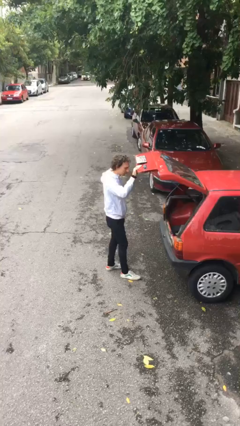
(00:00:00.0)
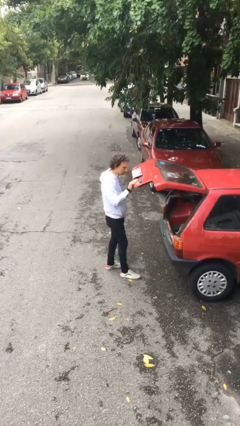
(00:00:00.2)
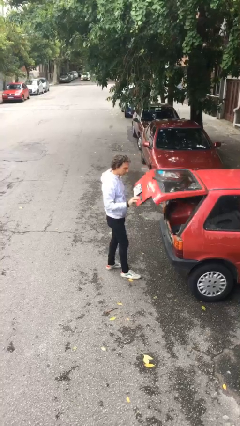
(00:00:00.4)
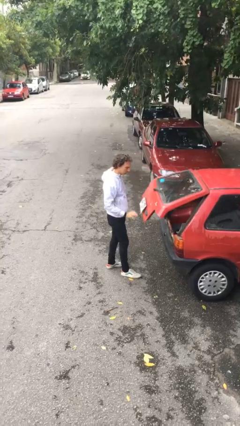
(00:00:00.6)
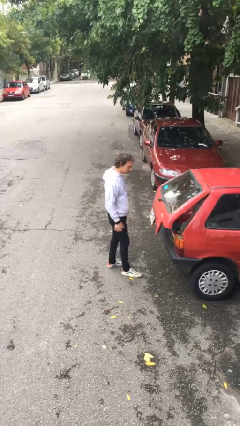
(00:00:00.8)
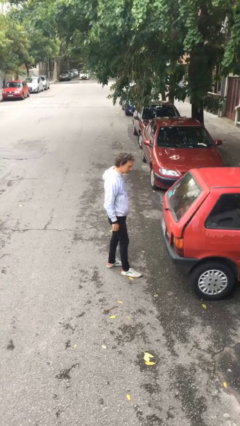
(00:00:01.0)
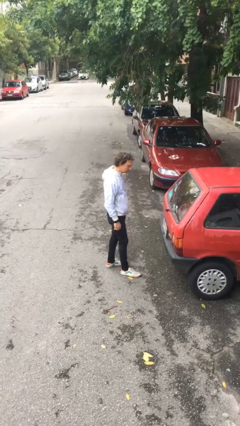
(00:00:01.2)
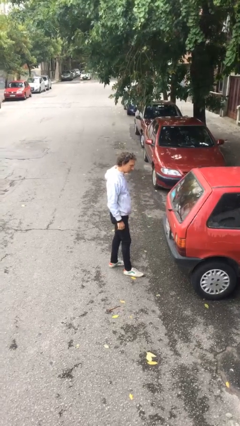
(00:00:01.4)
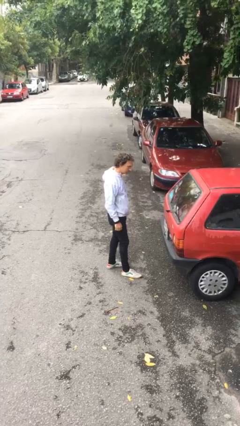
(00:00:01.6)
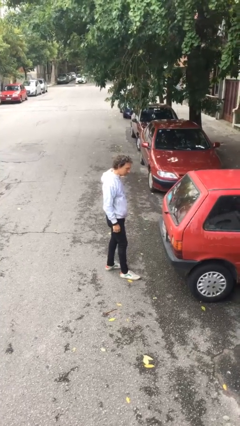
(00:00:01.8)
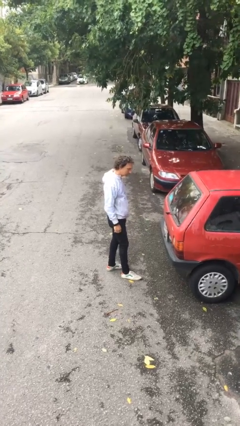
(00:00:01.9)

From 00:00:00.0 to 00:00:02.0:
person closes car trunk

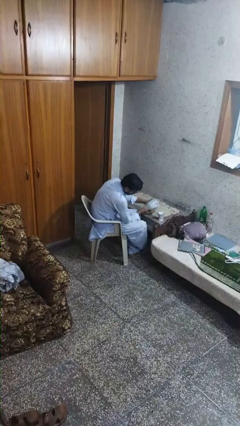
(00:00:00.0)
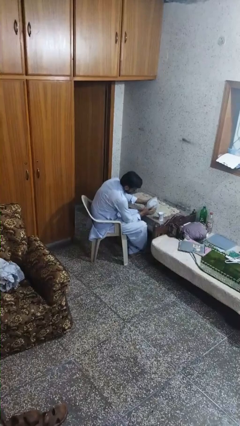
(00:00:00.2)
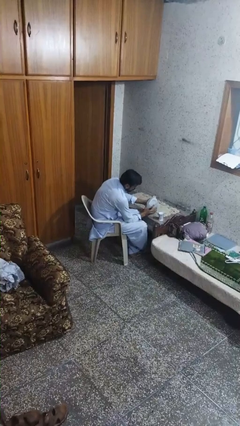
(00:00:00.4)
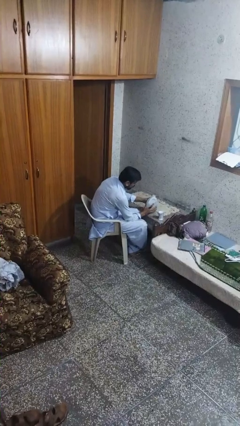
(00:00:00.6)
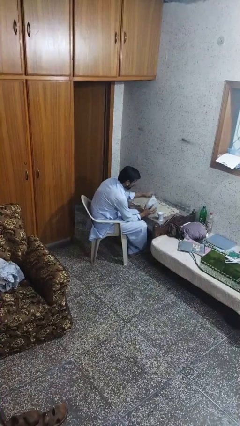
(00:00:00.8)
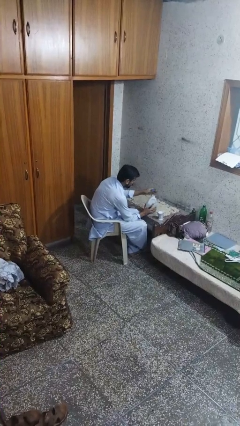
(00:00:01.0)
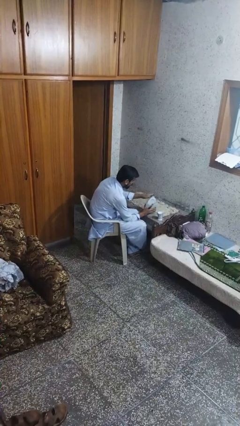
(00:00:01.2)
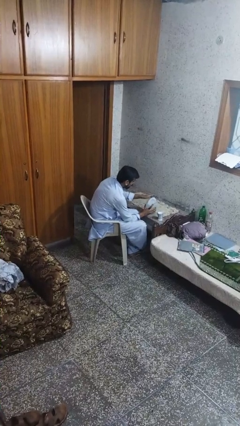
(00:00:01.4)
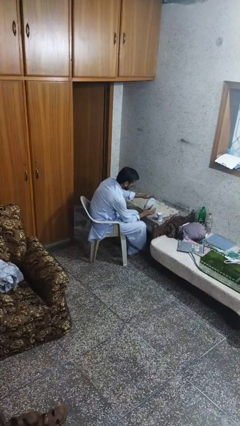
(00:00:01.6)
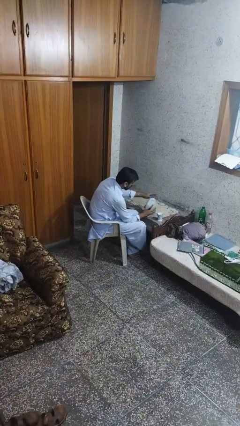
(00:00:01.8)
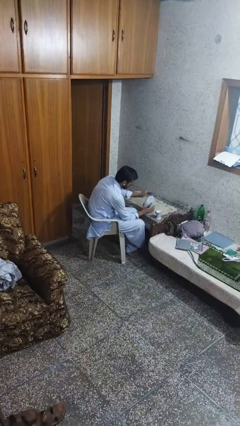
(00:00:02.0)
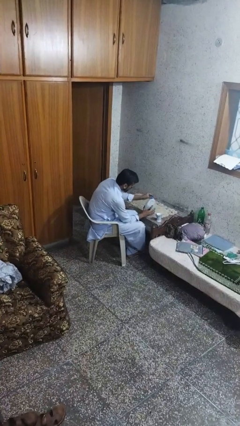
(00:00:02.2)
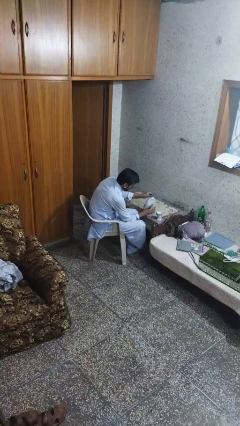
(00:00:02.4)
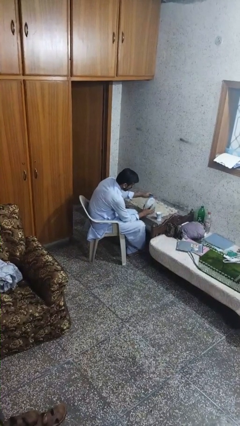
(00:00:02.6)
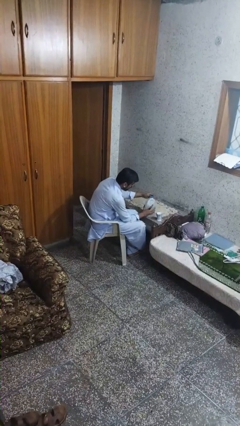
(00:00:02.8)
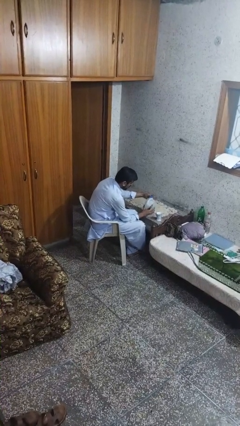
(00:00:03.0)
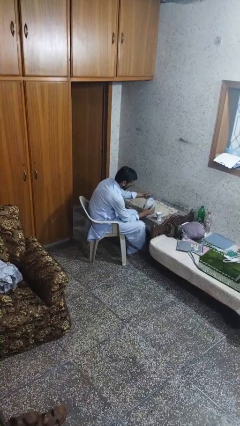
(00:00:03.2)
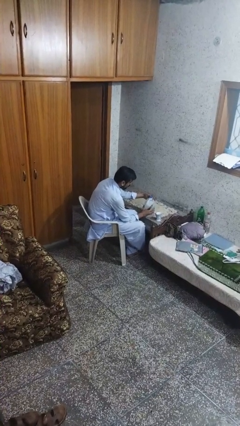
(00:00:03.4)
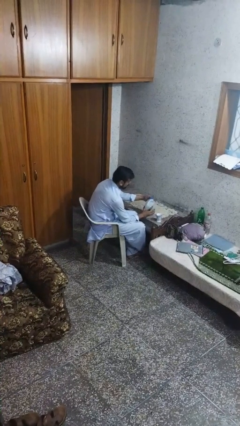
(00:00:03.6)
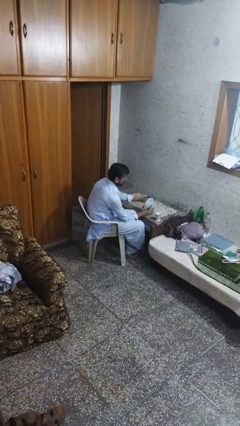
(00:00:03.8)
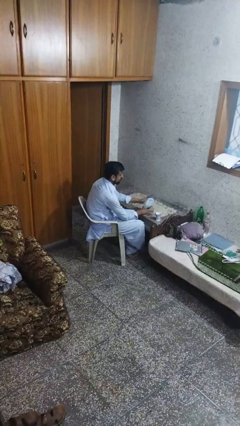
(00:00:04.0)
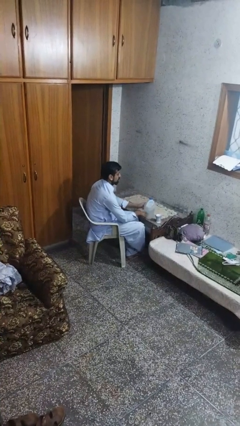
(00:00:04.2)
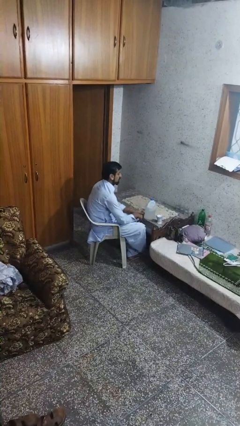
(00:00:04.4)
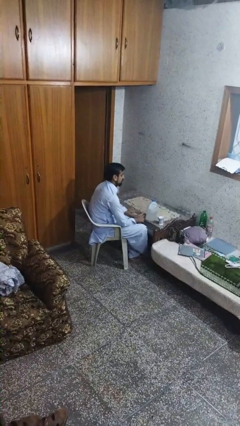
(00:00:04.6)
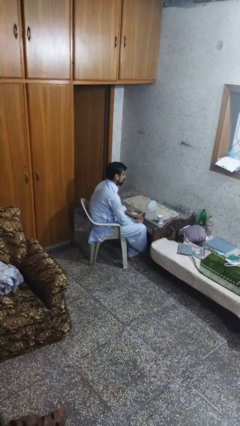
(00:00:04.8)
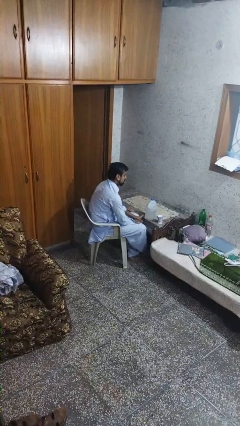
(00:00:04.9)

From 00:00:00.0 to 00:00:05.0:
person screws lid to bottle

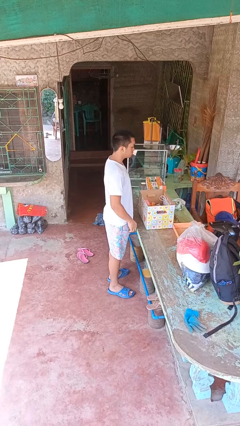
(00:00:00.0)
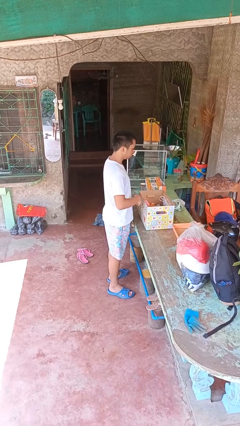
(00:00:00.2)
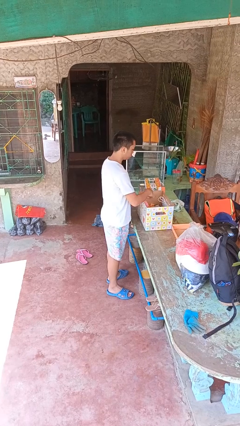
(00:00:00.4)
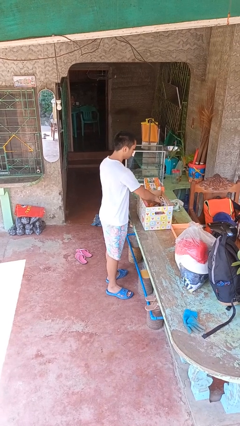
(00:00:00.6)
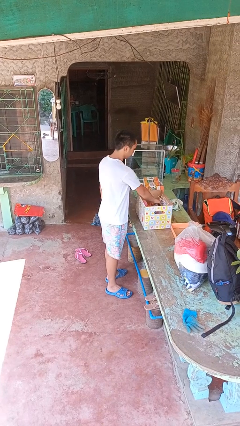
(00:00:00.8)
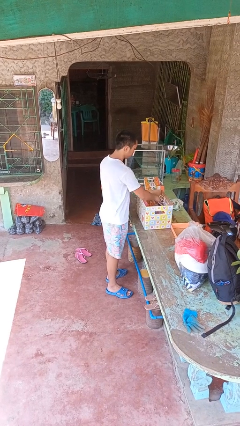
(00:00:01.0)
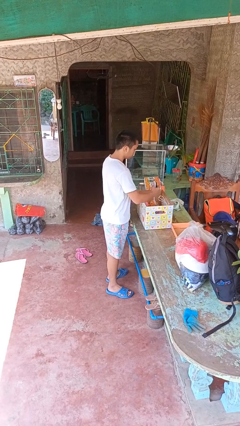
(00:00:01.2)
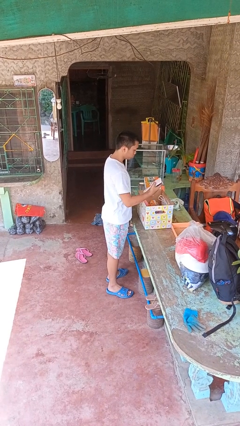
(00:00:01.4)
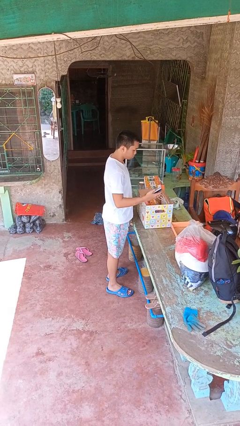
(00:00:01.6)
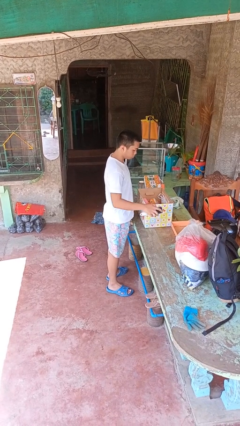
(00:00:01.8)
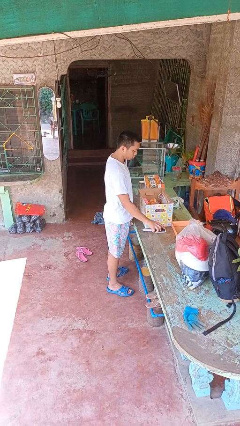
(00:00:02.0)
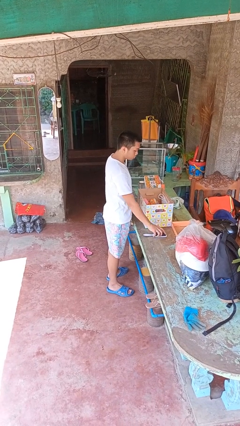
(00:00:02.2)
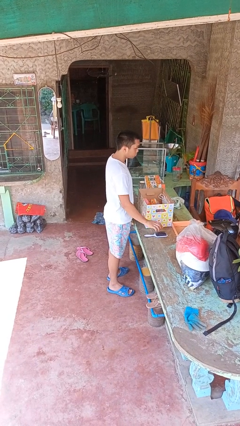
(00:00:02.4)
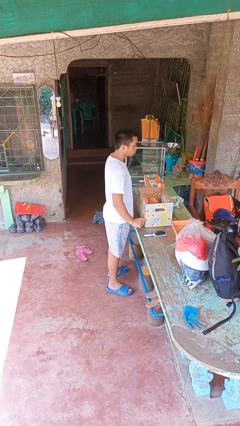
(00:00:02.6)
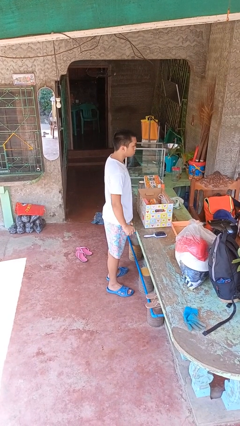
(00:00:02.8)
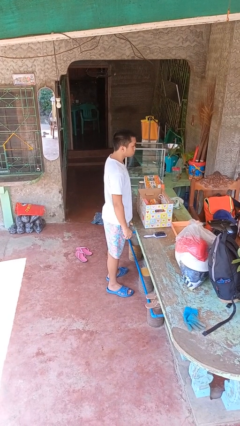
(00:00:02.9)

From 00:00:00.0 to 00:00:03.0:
person takes object from box

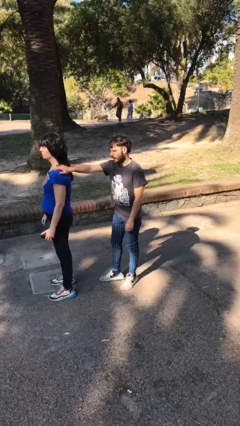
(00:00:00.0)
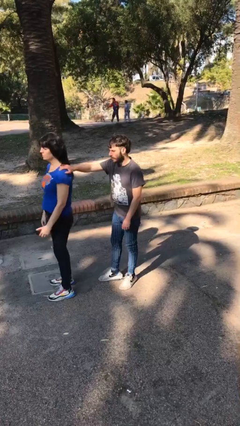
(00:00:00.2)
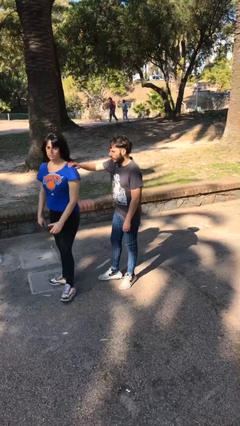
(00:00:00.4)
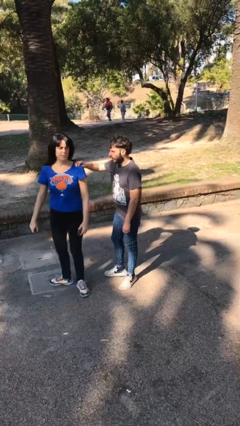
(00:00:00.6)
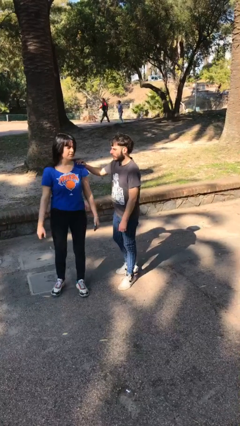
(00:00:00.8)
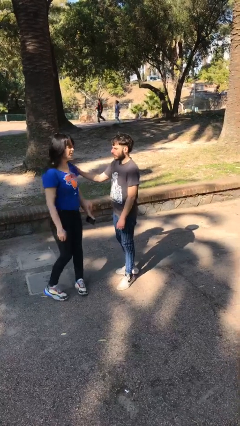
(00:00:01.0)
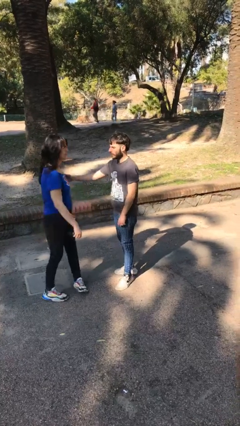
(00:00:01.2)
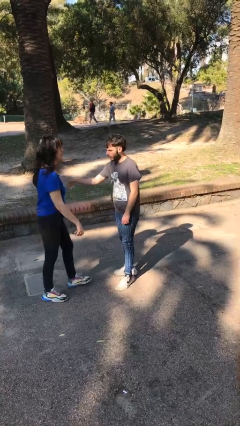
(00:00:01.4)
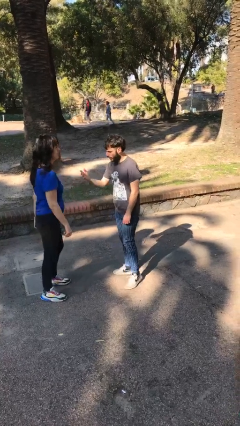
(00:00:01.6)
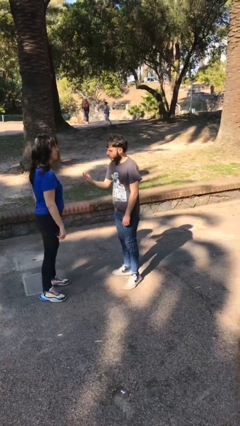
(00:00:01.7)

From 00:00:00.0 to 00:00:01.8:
person spins person around

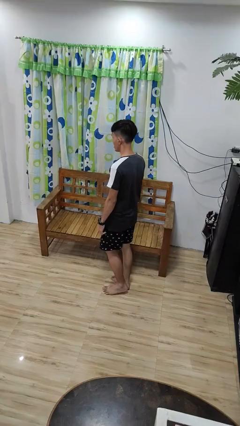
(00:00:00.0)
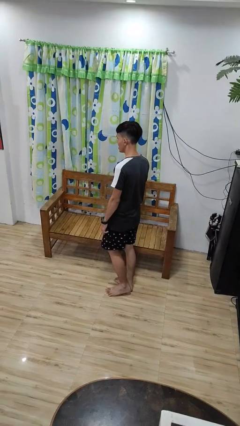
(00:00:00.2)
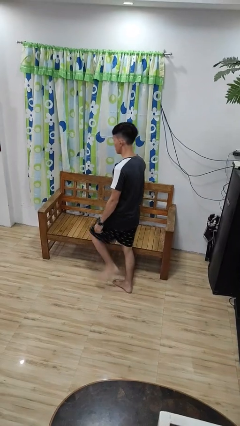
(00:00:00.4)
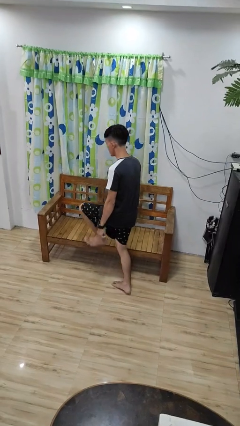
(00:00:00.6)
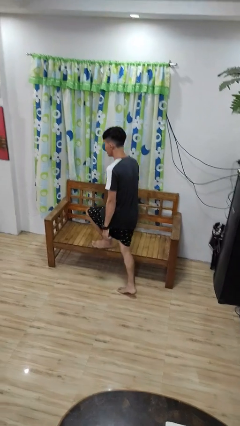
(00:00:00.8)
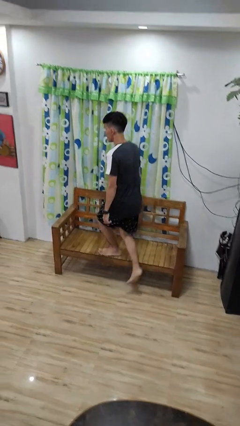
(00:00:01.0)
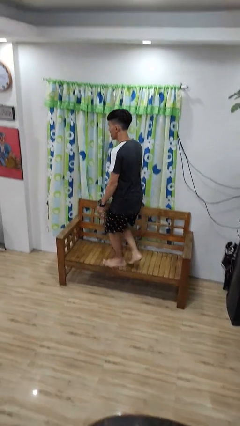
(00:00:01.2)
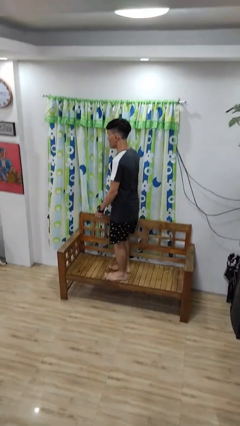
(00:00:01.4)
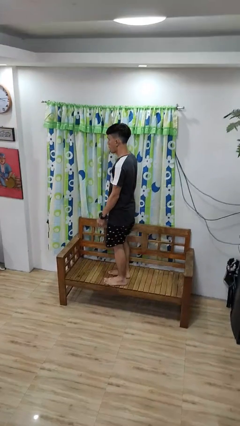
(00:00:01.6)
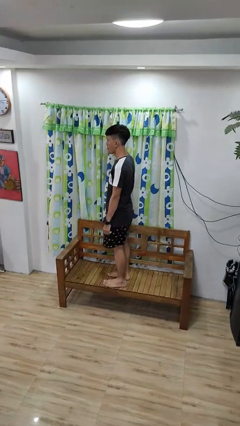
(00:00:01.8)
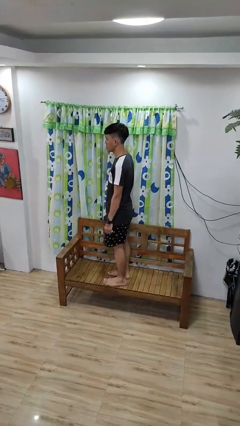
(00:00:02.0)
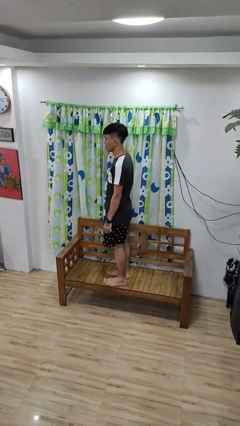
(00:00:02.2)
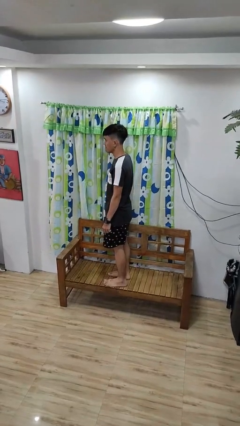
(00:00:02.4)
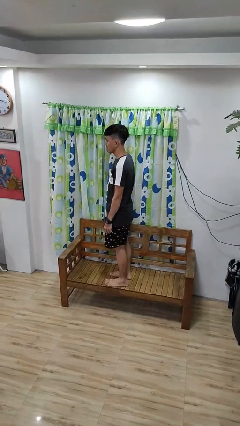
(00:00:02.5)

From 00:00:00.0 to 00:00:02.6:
person climbs on couch

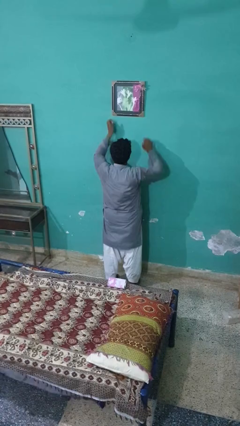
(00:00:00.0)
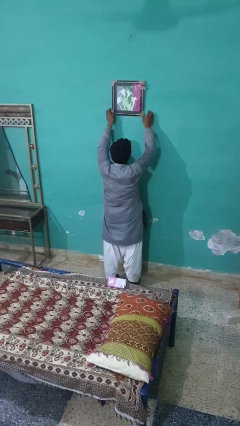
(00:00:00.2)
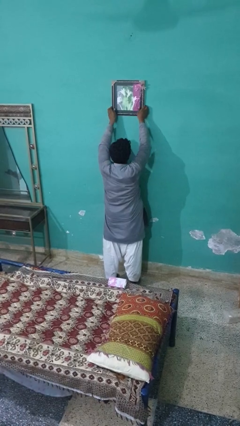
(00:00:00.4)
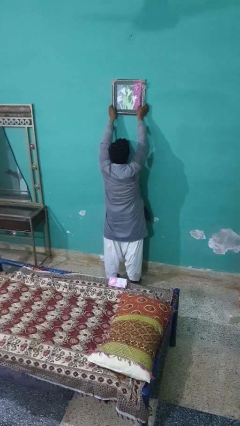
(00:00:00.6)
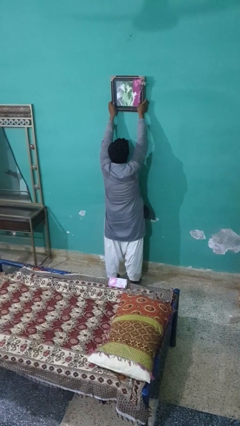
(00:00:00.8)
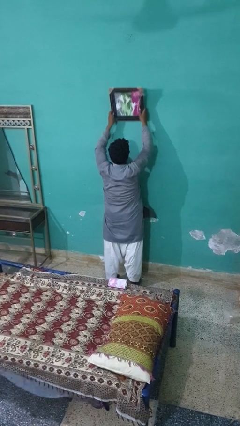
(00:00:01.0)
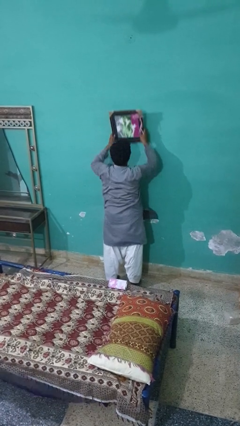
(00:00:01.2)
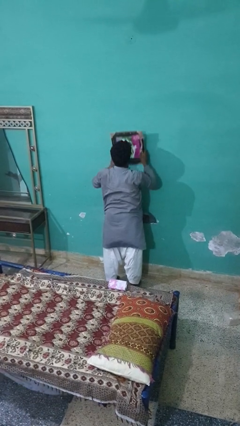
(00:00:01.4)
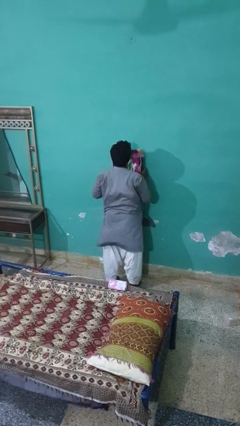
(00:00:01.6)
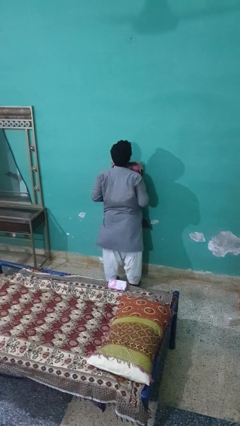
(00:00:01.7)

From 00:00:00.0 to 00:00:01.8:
person takes down picture frame

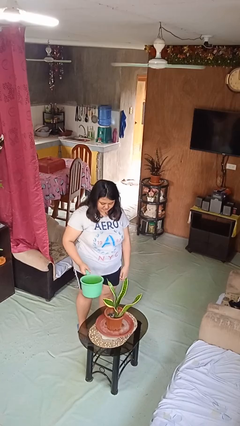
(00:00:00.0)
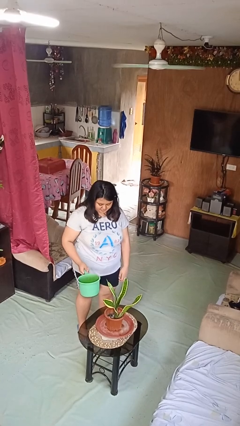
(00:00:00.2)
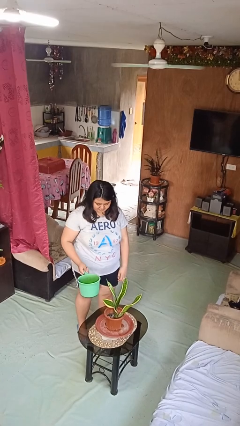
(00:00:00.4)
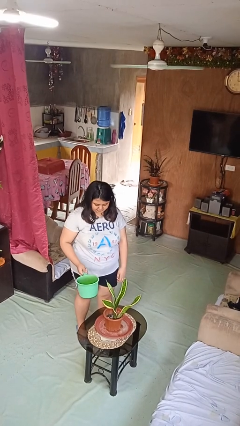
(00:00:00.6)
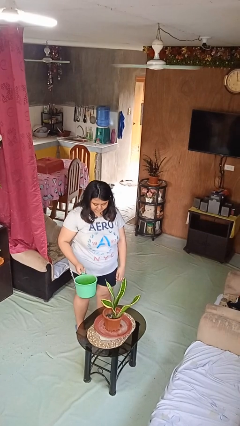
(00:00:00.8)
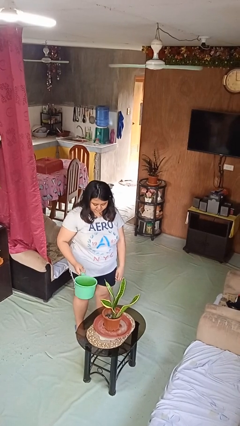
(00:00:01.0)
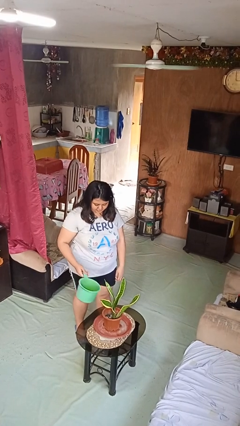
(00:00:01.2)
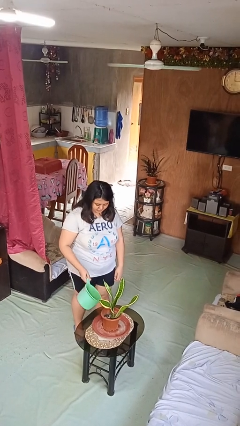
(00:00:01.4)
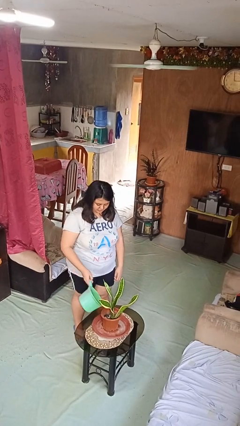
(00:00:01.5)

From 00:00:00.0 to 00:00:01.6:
person waters houseplant
